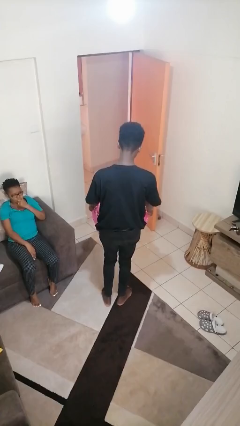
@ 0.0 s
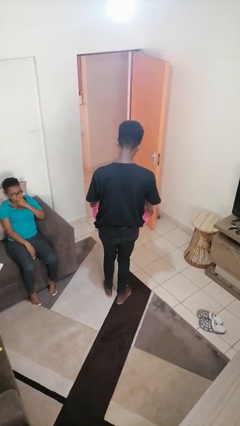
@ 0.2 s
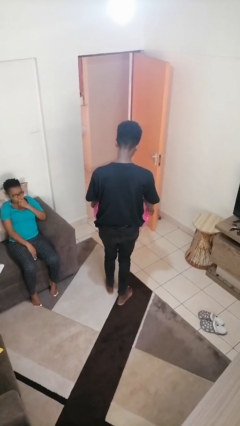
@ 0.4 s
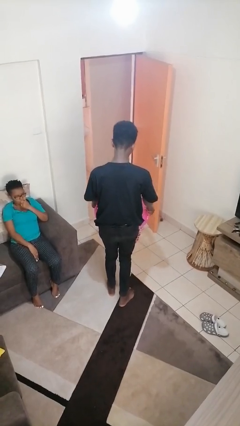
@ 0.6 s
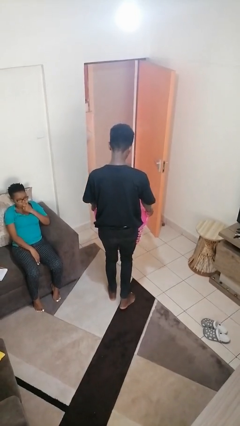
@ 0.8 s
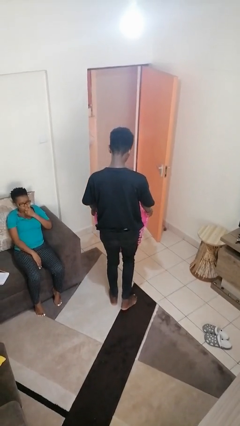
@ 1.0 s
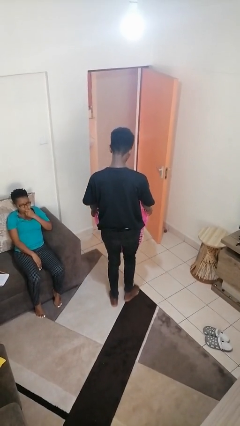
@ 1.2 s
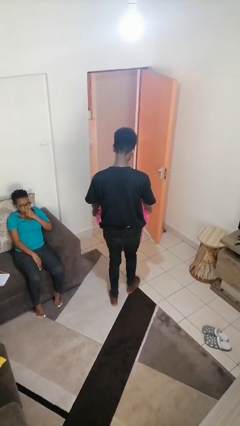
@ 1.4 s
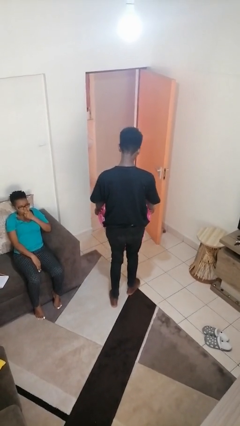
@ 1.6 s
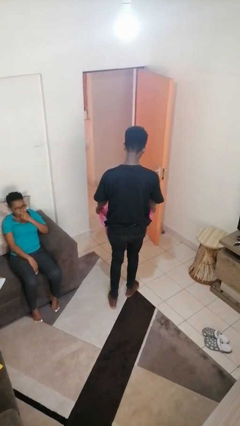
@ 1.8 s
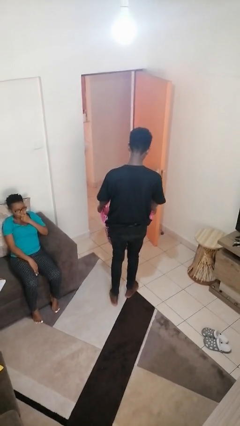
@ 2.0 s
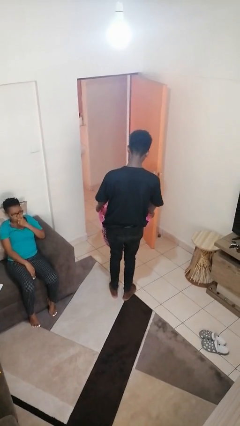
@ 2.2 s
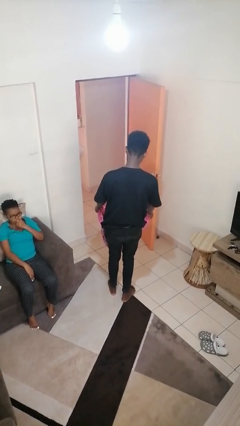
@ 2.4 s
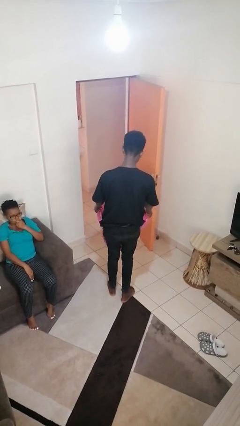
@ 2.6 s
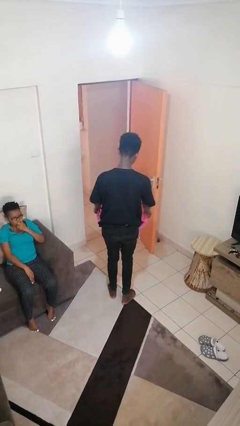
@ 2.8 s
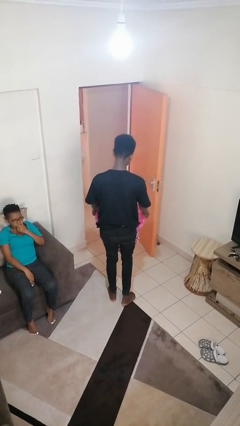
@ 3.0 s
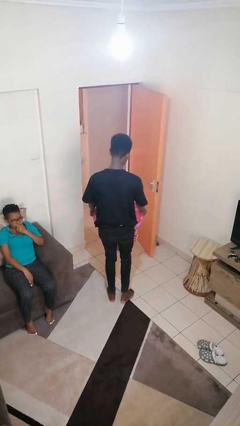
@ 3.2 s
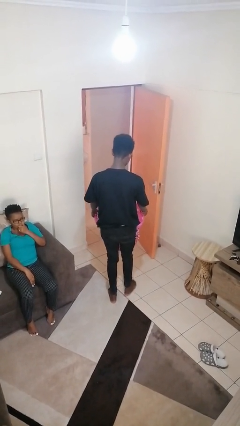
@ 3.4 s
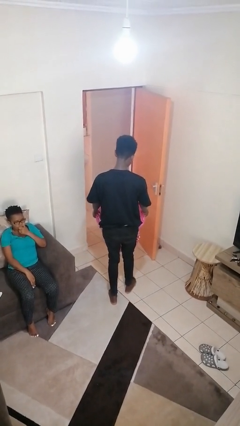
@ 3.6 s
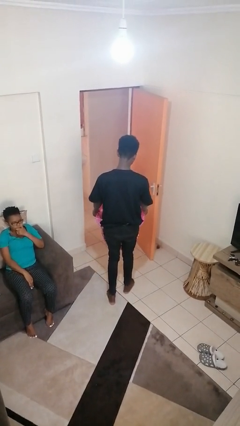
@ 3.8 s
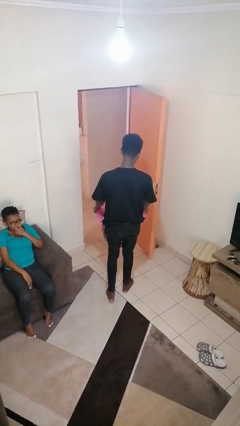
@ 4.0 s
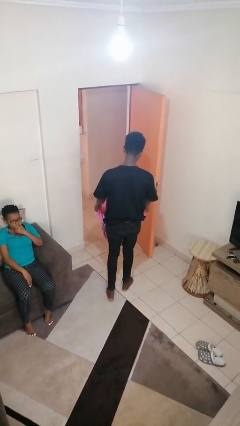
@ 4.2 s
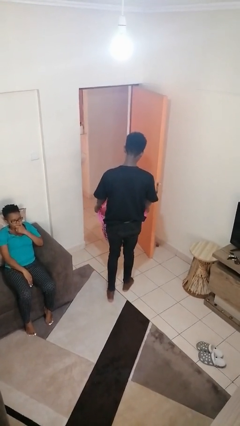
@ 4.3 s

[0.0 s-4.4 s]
person carries laundry basket

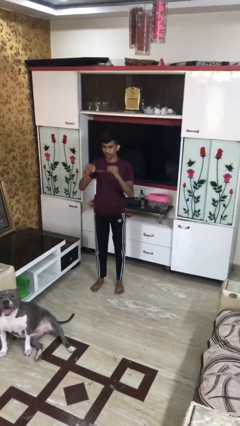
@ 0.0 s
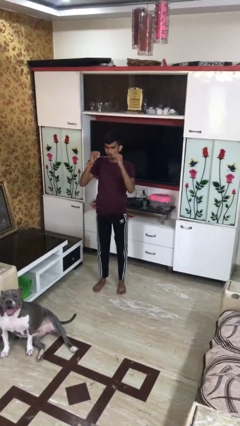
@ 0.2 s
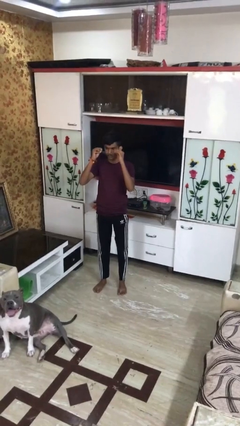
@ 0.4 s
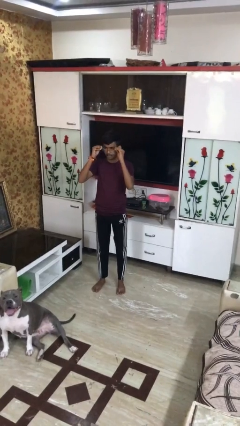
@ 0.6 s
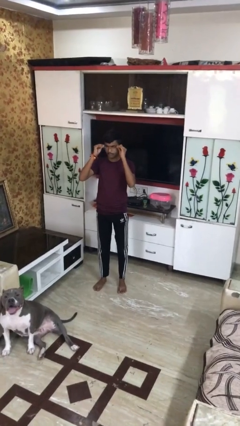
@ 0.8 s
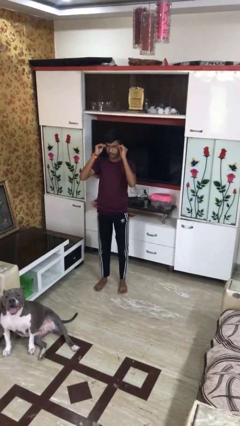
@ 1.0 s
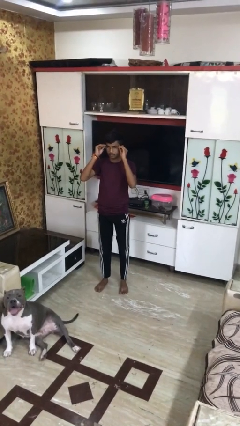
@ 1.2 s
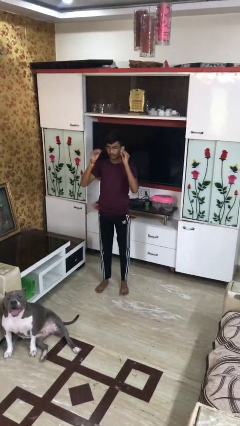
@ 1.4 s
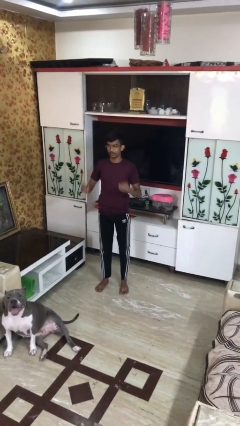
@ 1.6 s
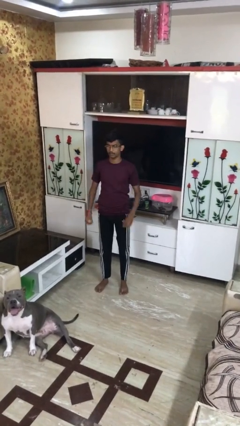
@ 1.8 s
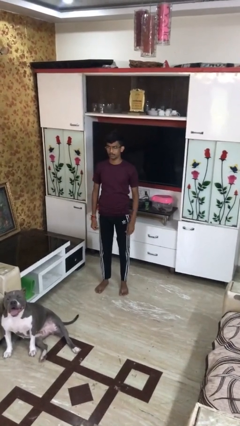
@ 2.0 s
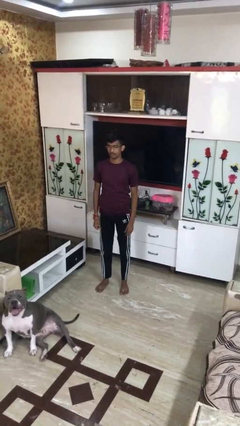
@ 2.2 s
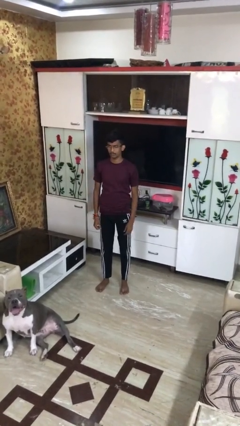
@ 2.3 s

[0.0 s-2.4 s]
person puts on glasses

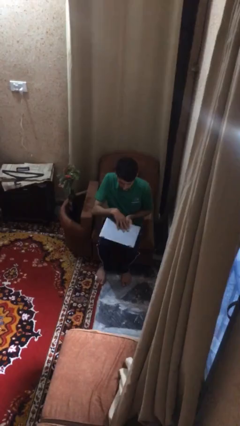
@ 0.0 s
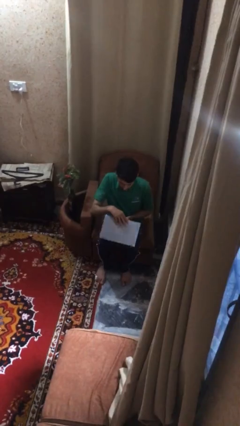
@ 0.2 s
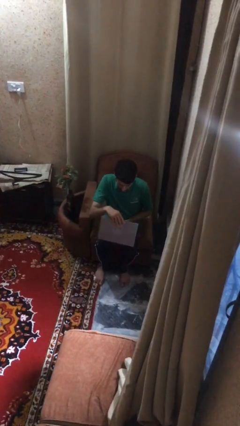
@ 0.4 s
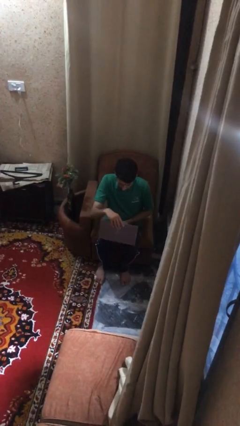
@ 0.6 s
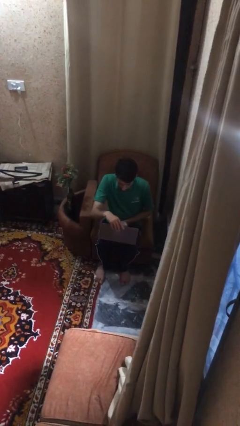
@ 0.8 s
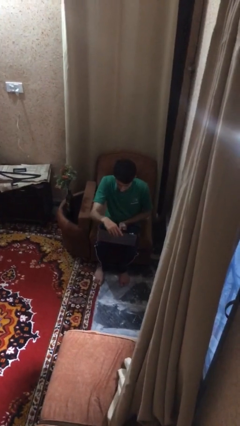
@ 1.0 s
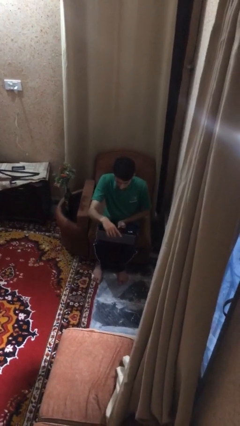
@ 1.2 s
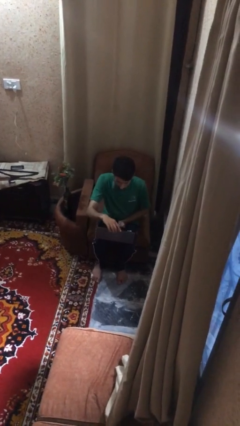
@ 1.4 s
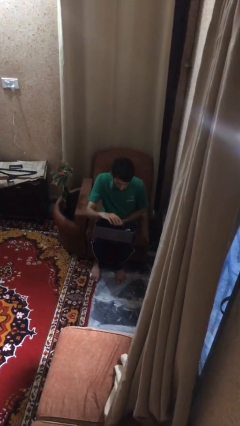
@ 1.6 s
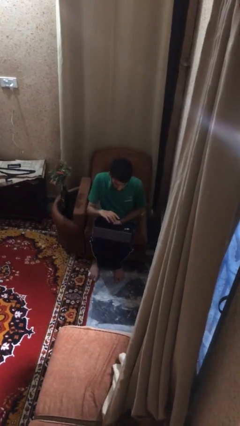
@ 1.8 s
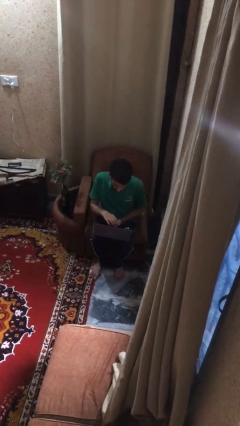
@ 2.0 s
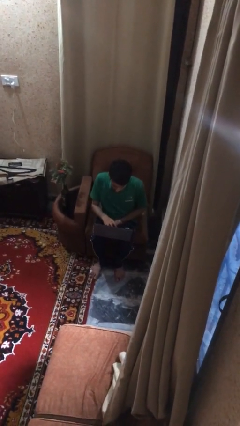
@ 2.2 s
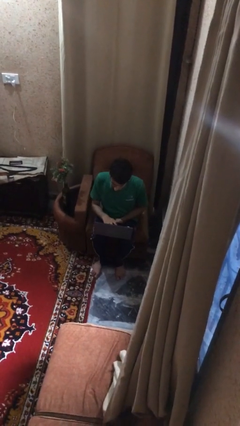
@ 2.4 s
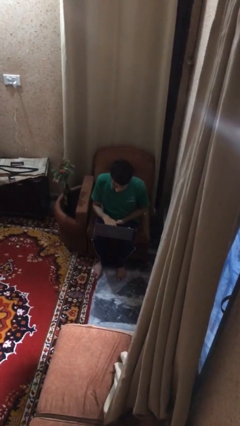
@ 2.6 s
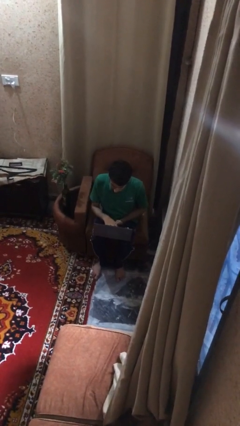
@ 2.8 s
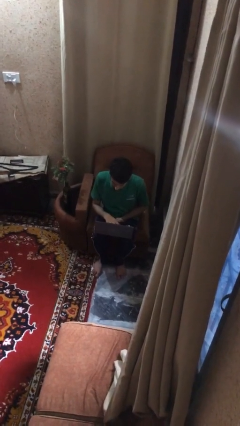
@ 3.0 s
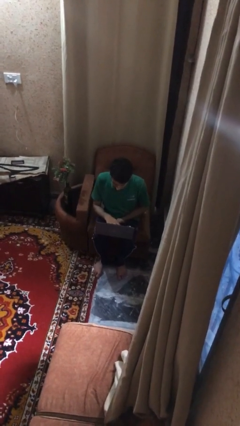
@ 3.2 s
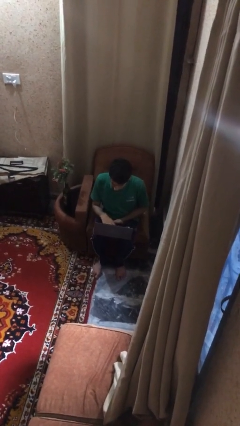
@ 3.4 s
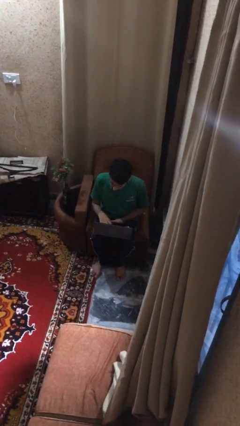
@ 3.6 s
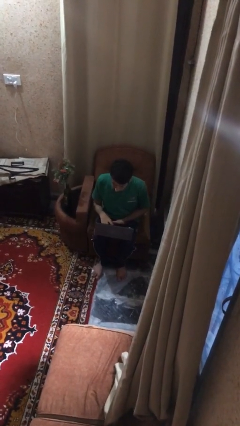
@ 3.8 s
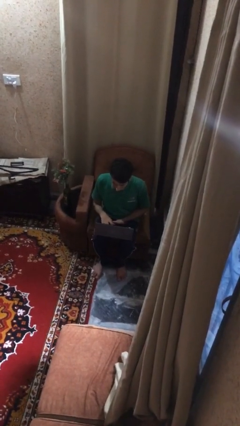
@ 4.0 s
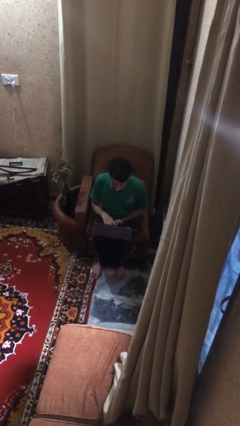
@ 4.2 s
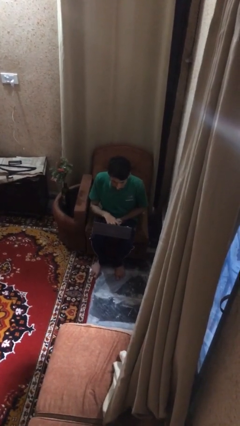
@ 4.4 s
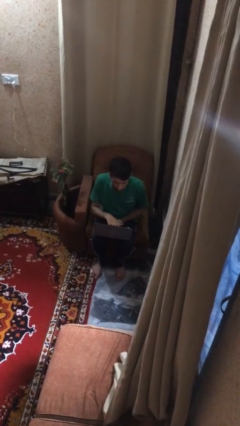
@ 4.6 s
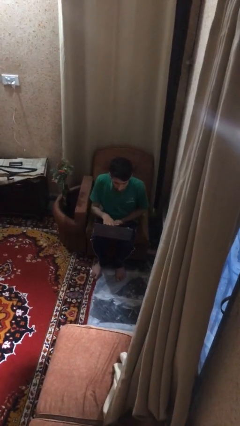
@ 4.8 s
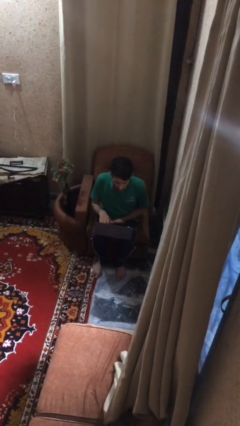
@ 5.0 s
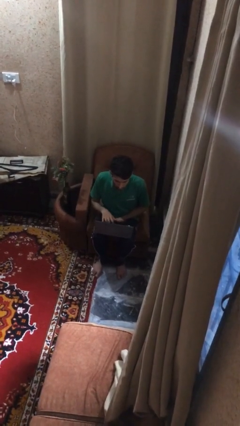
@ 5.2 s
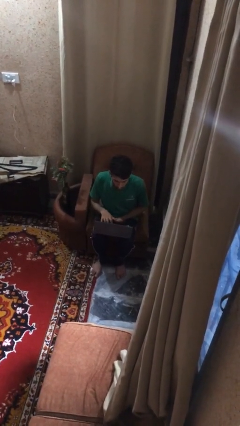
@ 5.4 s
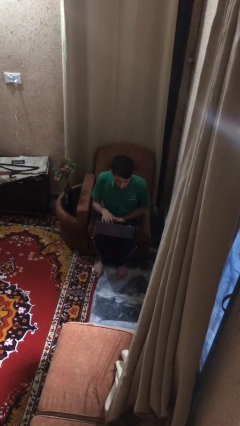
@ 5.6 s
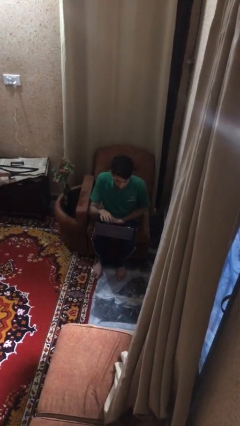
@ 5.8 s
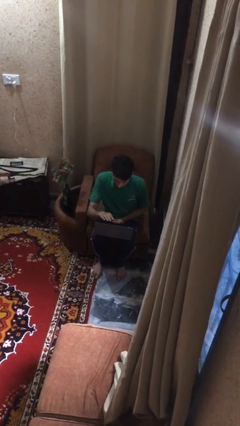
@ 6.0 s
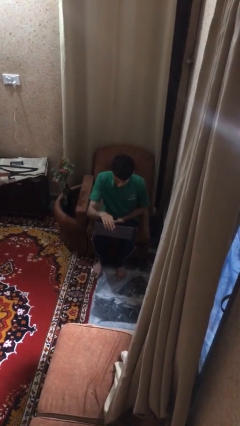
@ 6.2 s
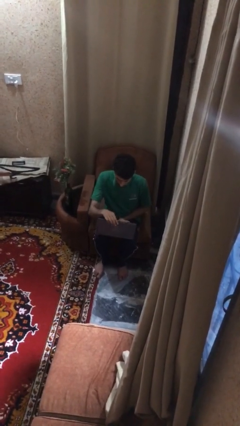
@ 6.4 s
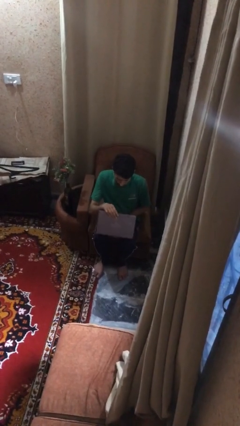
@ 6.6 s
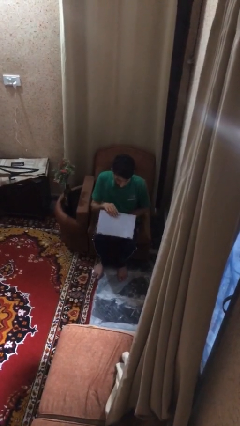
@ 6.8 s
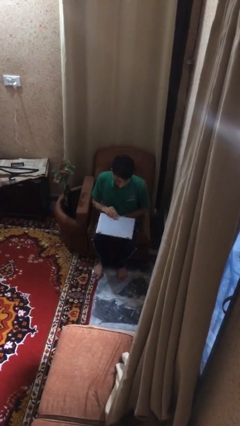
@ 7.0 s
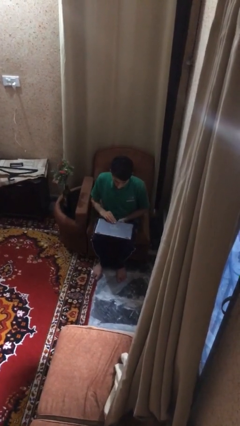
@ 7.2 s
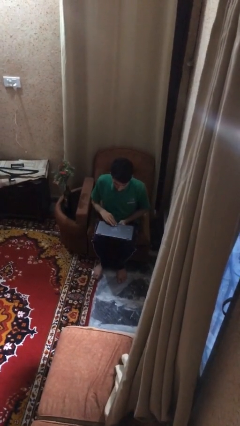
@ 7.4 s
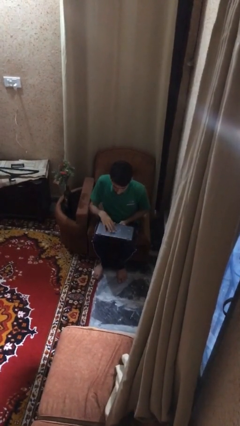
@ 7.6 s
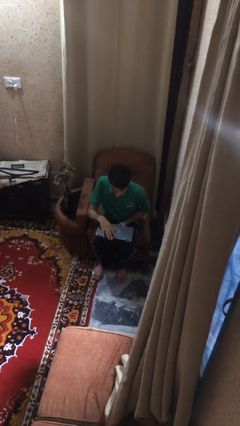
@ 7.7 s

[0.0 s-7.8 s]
person interacts with laptop

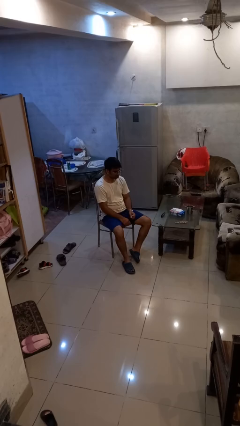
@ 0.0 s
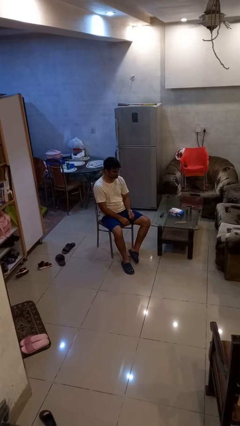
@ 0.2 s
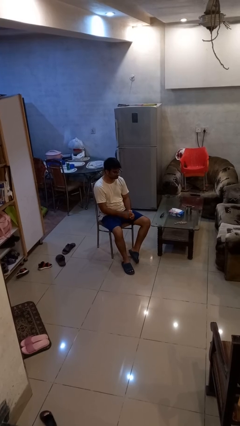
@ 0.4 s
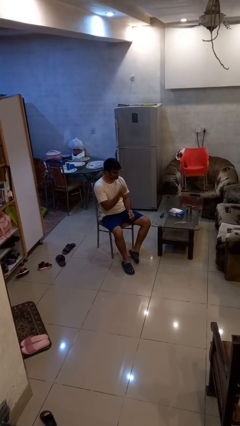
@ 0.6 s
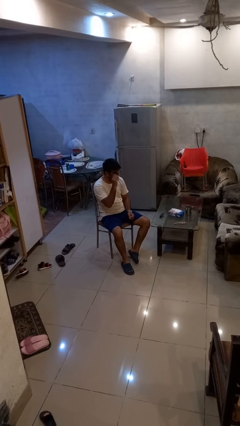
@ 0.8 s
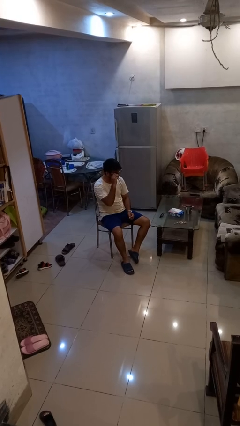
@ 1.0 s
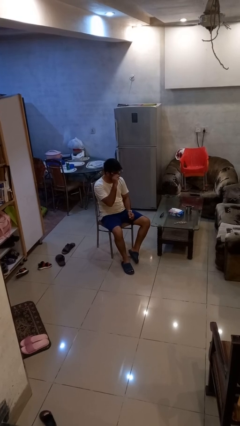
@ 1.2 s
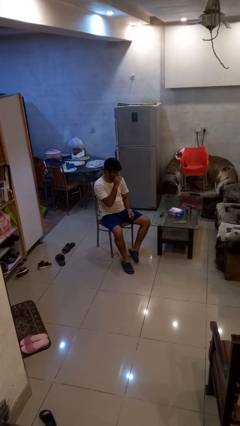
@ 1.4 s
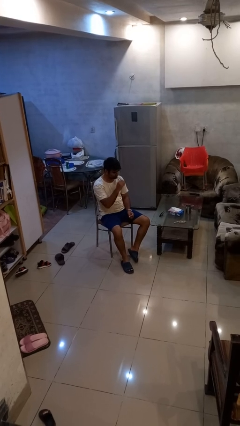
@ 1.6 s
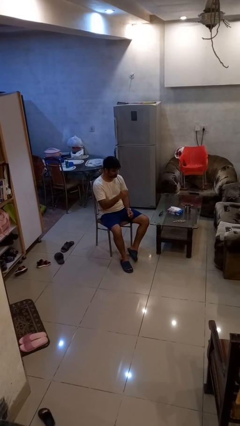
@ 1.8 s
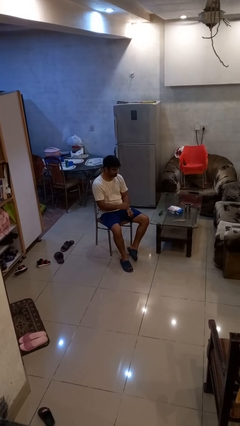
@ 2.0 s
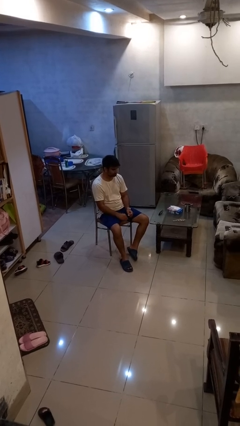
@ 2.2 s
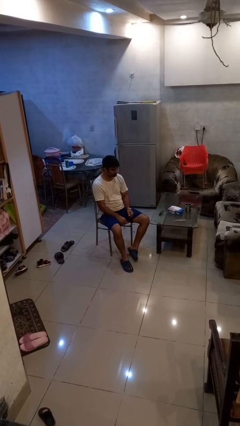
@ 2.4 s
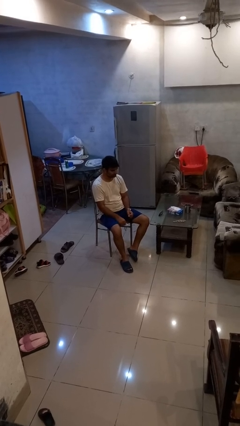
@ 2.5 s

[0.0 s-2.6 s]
person takes off glasses

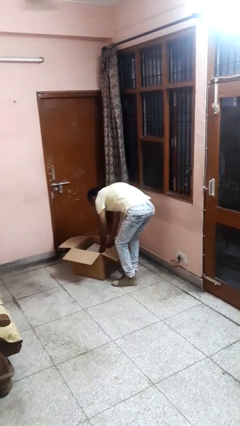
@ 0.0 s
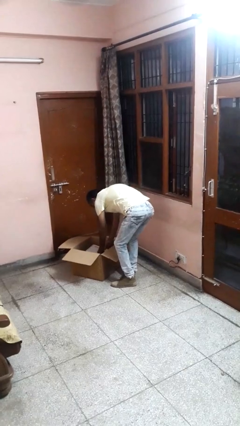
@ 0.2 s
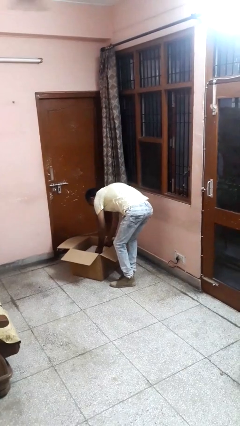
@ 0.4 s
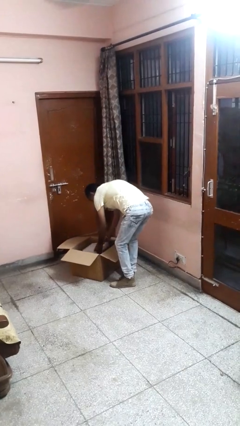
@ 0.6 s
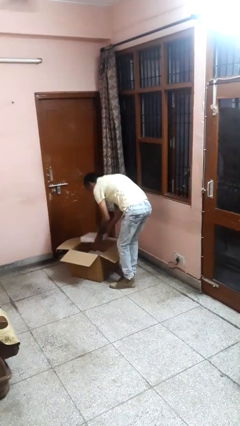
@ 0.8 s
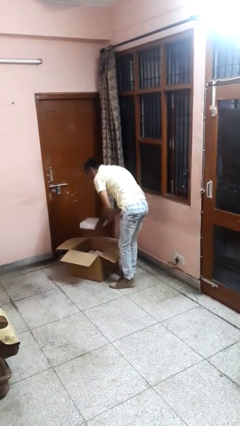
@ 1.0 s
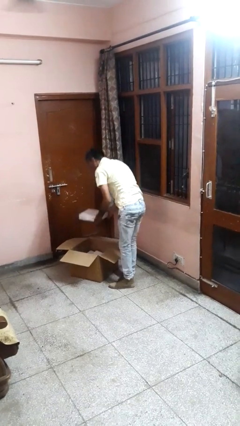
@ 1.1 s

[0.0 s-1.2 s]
person takes object from box
